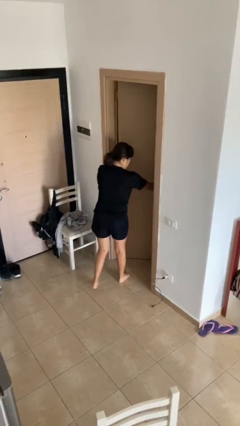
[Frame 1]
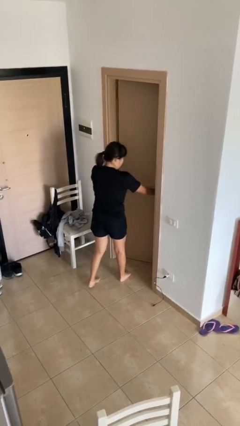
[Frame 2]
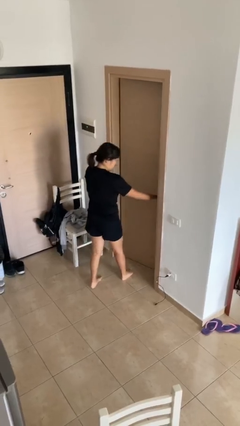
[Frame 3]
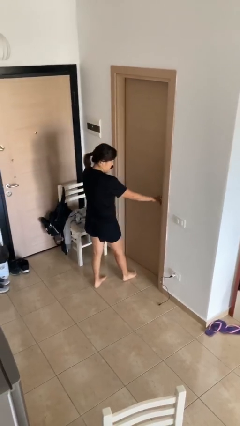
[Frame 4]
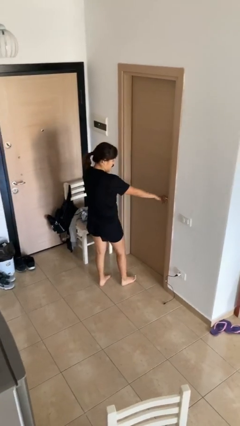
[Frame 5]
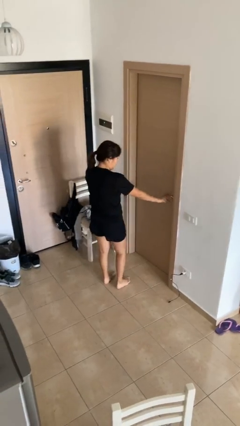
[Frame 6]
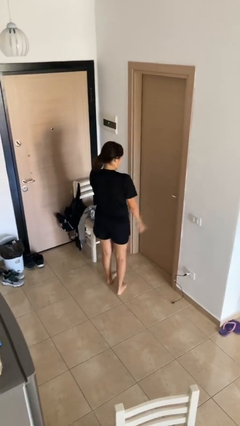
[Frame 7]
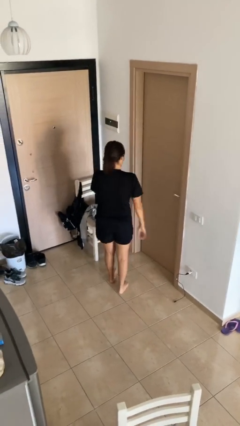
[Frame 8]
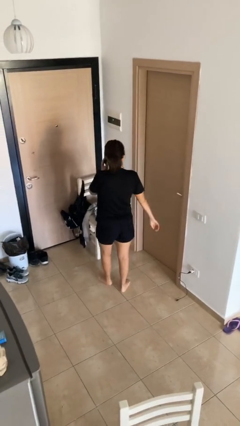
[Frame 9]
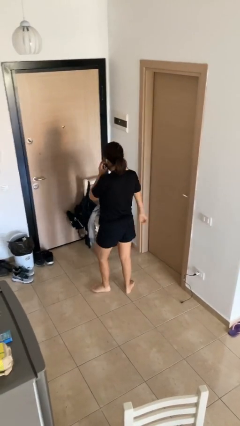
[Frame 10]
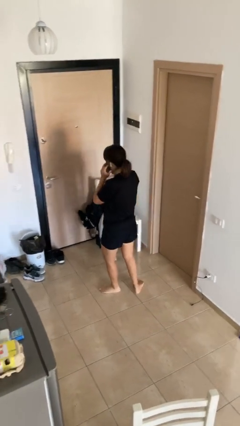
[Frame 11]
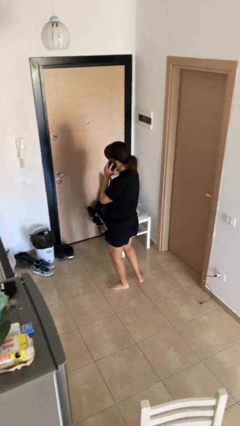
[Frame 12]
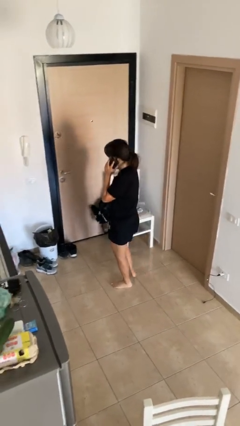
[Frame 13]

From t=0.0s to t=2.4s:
person closes facility door

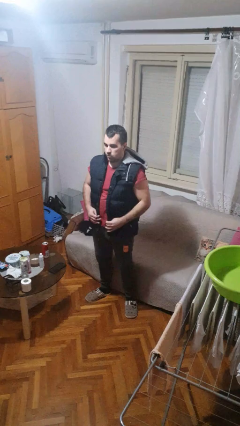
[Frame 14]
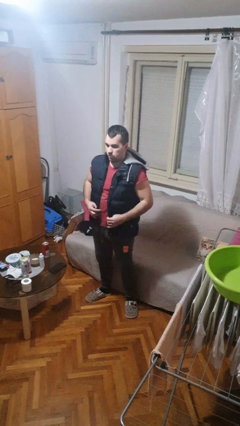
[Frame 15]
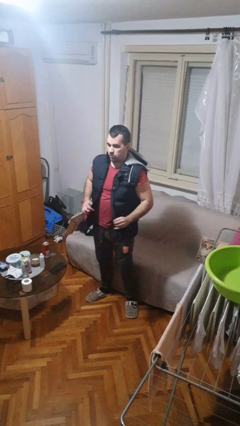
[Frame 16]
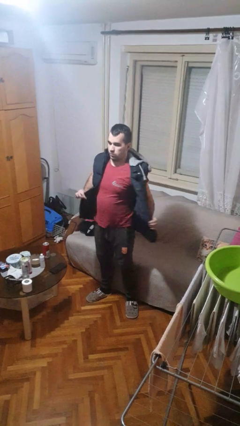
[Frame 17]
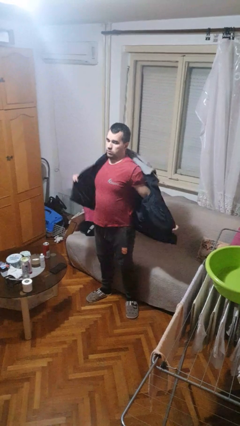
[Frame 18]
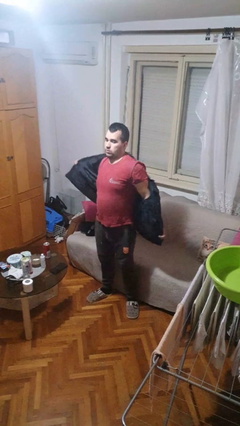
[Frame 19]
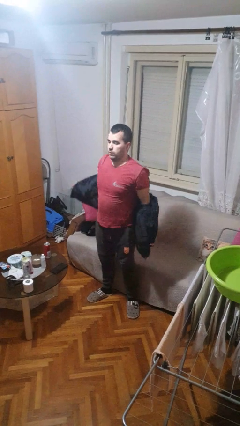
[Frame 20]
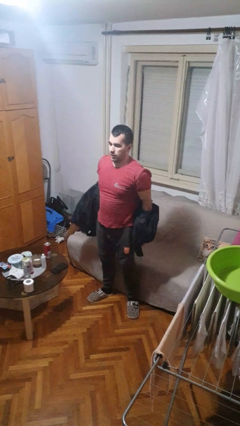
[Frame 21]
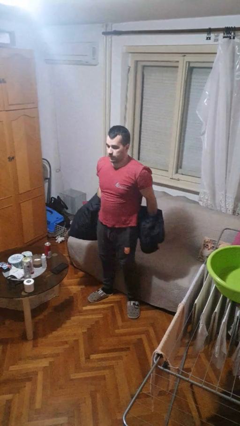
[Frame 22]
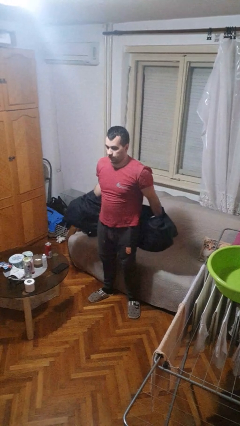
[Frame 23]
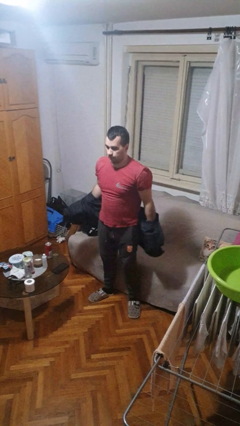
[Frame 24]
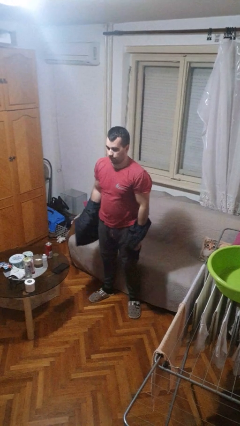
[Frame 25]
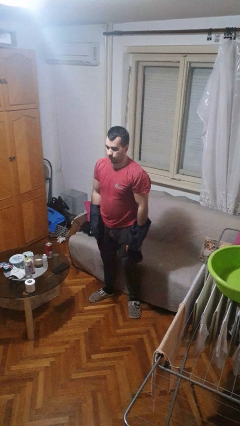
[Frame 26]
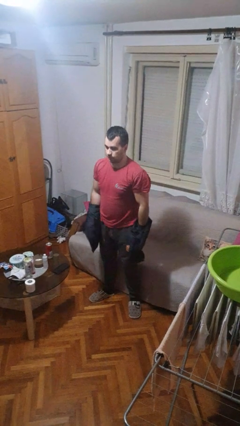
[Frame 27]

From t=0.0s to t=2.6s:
person takes off jacket

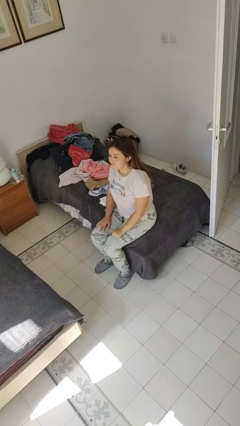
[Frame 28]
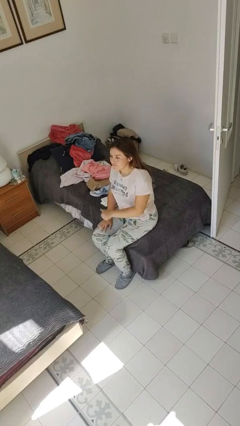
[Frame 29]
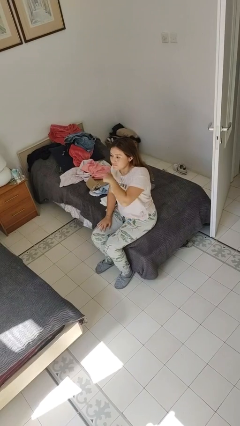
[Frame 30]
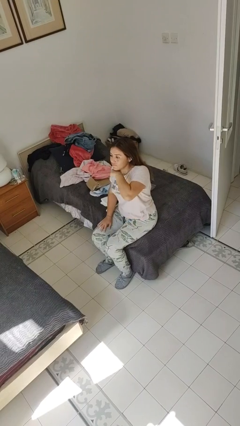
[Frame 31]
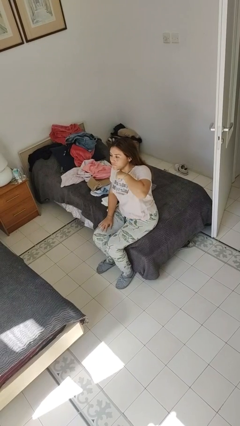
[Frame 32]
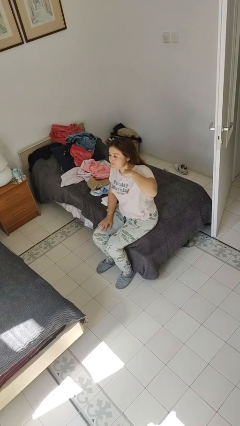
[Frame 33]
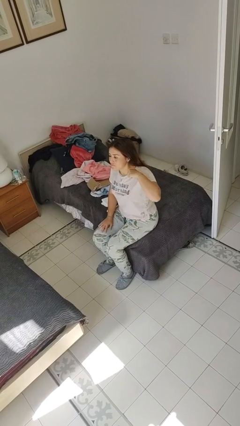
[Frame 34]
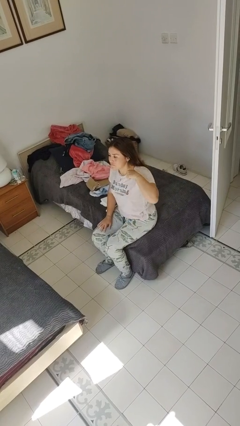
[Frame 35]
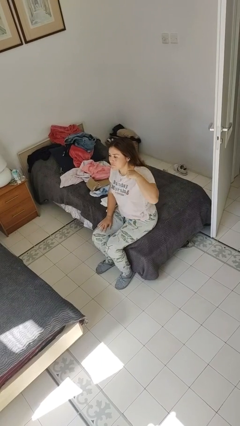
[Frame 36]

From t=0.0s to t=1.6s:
person gestures cut

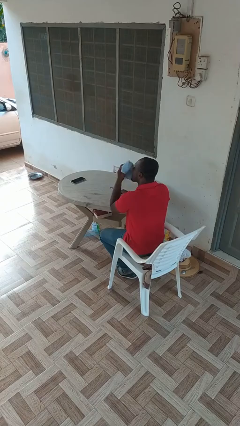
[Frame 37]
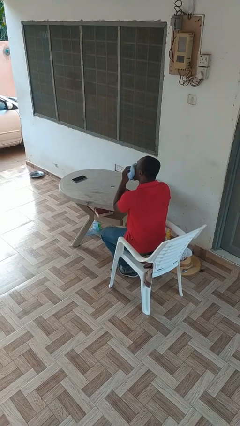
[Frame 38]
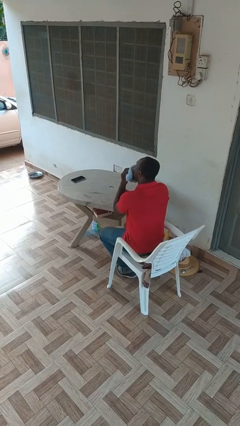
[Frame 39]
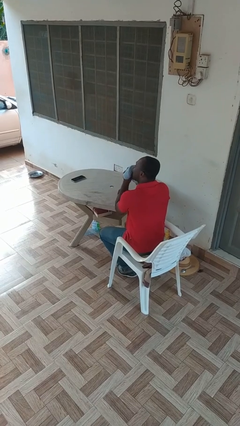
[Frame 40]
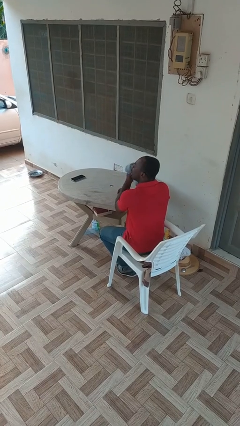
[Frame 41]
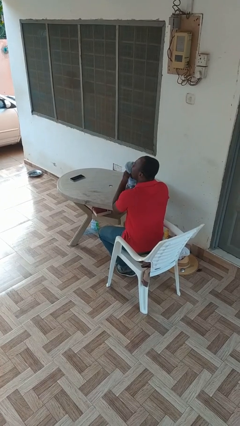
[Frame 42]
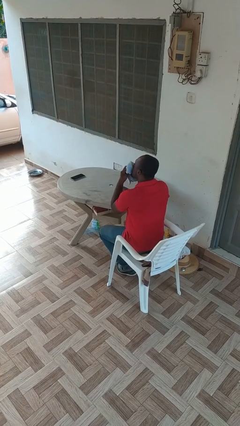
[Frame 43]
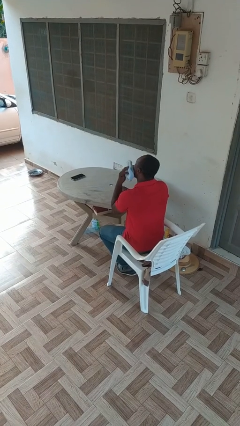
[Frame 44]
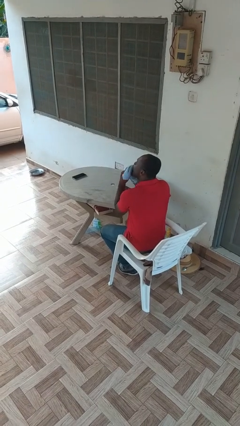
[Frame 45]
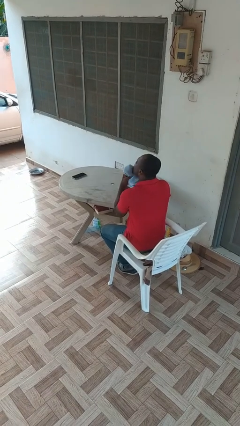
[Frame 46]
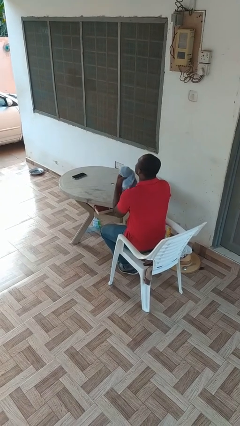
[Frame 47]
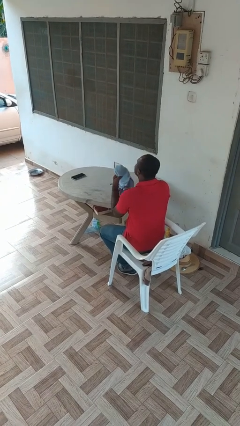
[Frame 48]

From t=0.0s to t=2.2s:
person wipes mouth with napkin

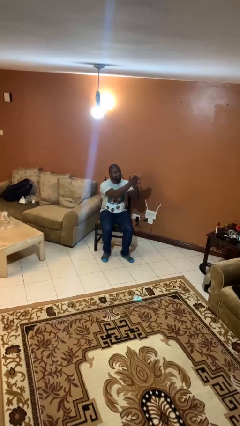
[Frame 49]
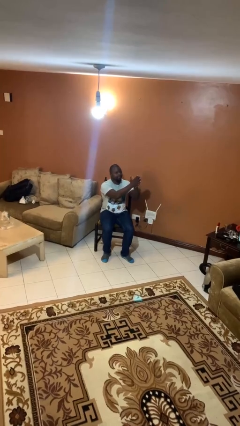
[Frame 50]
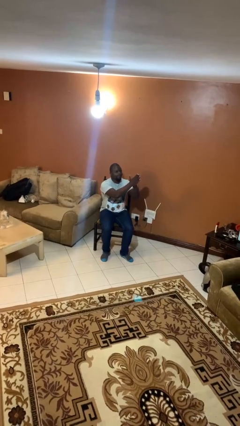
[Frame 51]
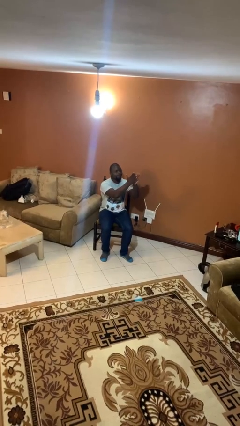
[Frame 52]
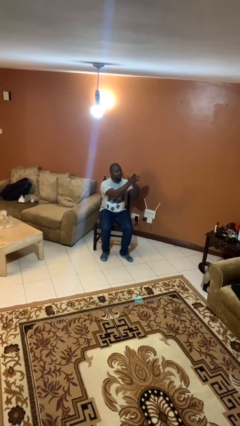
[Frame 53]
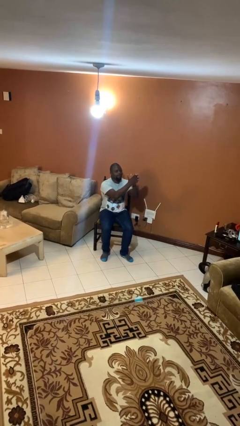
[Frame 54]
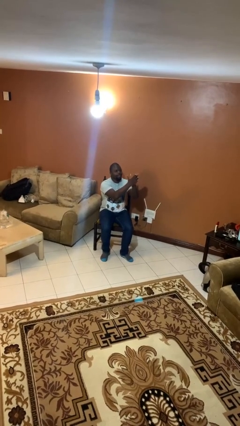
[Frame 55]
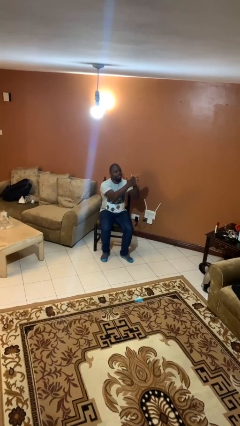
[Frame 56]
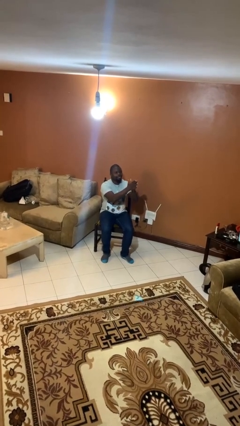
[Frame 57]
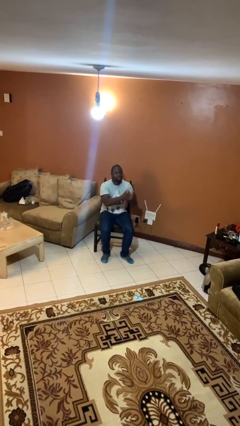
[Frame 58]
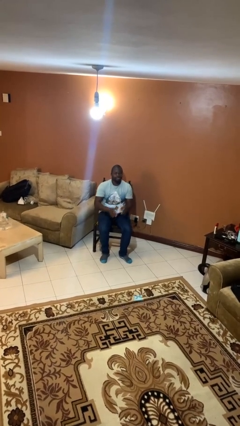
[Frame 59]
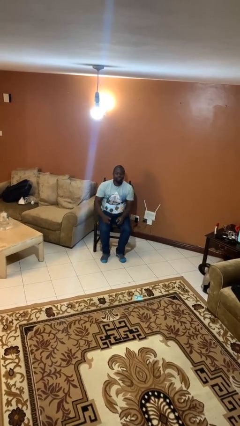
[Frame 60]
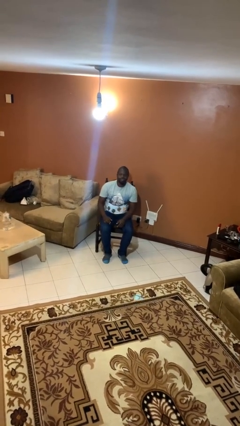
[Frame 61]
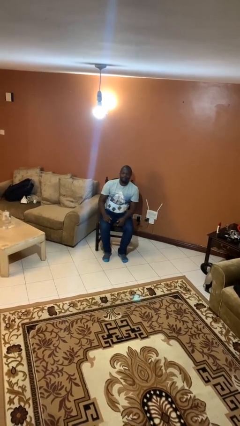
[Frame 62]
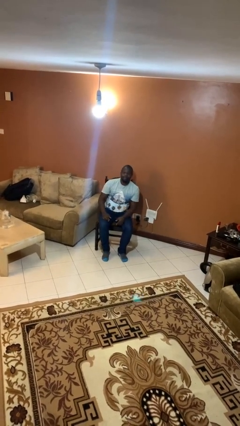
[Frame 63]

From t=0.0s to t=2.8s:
person claps hands

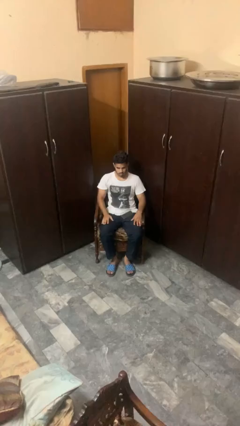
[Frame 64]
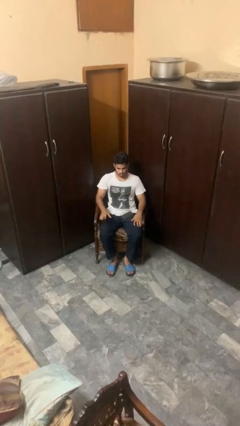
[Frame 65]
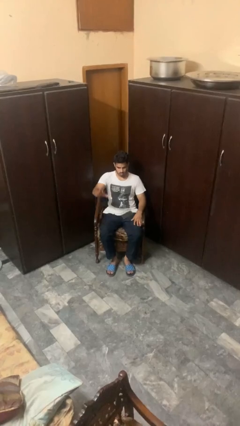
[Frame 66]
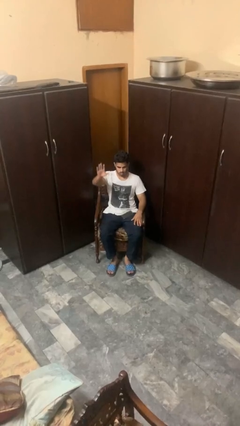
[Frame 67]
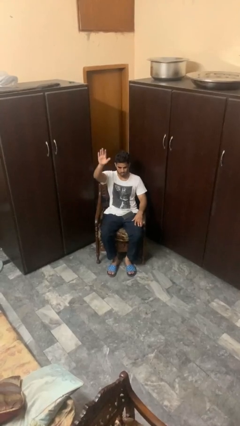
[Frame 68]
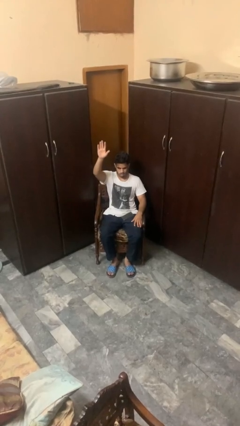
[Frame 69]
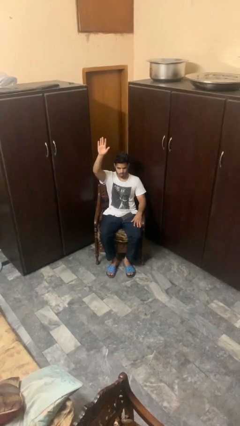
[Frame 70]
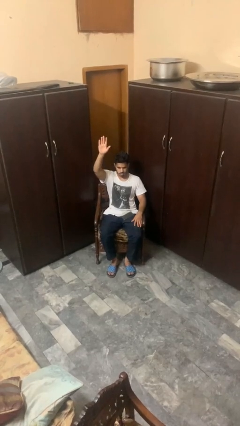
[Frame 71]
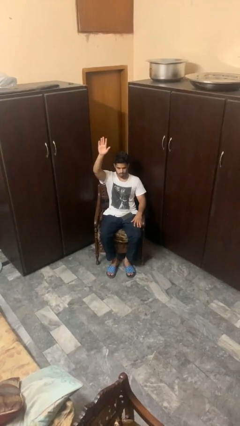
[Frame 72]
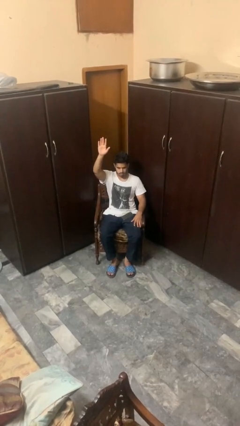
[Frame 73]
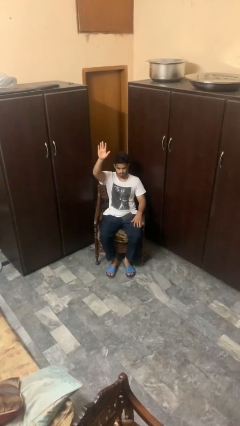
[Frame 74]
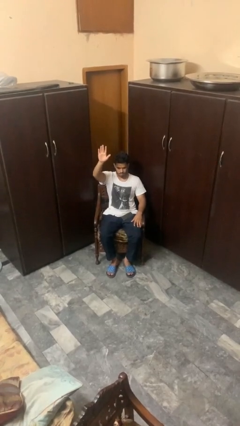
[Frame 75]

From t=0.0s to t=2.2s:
person gestures raise hand

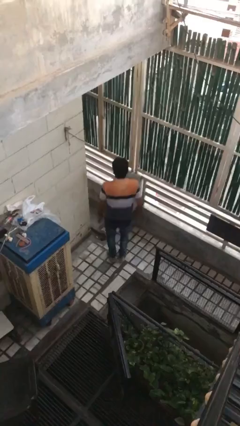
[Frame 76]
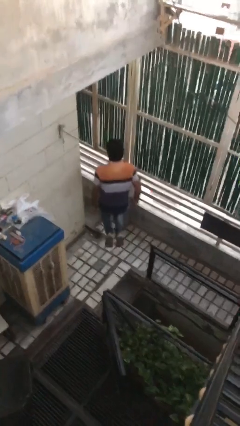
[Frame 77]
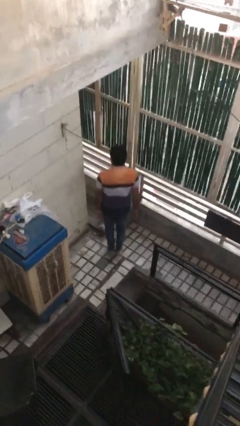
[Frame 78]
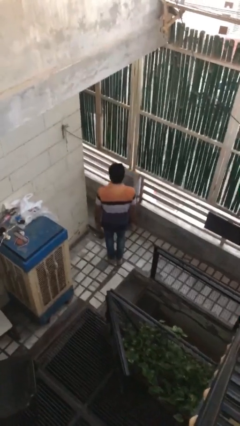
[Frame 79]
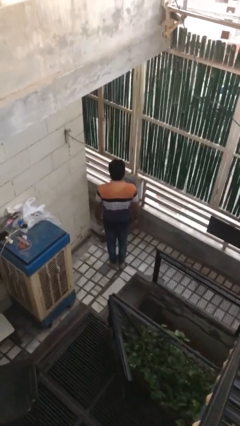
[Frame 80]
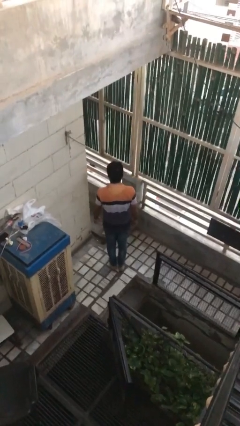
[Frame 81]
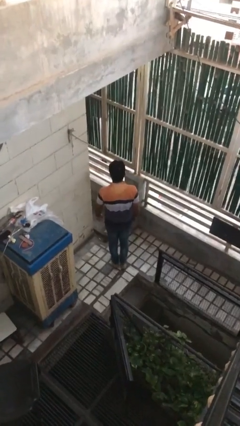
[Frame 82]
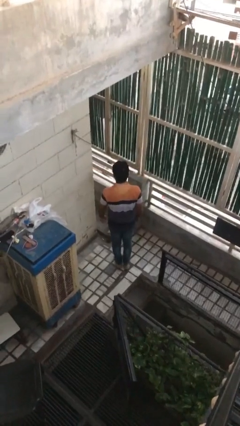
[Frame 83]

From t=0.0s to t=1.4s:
person jumps

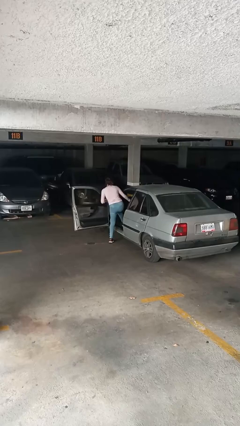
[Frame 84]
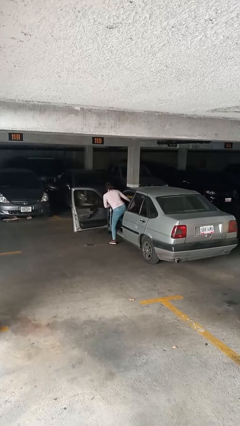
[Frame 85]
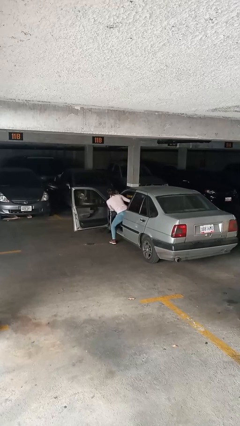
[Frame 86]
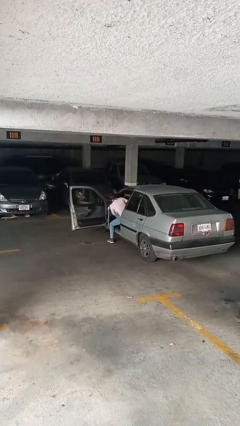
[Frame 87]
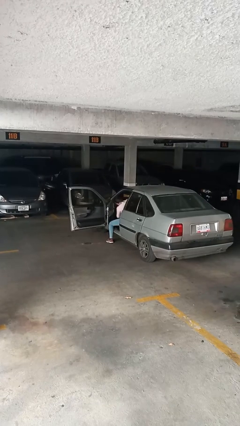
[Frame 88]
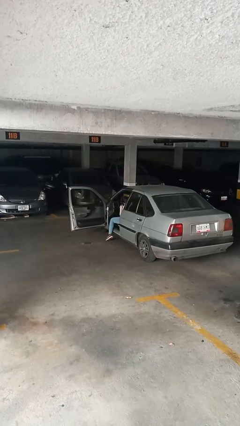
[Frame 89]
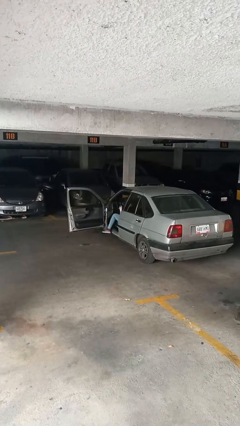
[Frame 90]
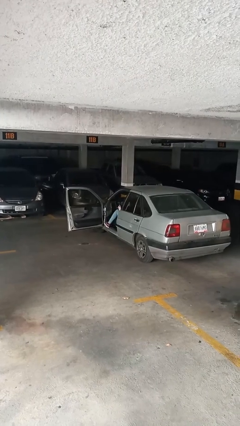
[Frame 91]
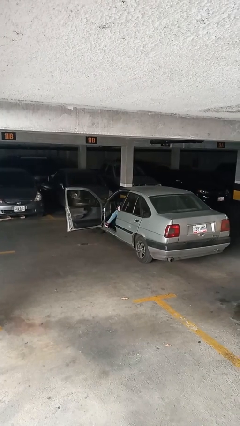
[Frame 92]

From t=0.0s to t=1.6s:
person enters car
